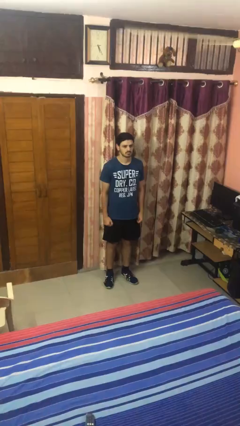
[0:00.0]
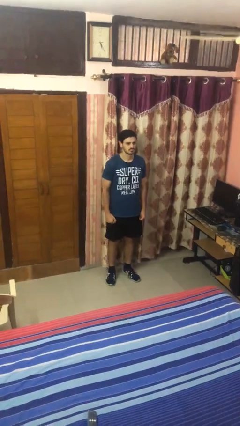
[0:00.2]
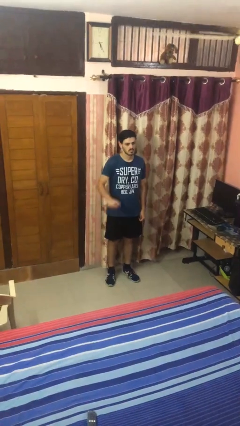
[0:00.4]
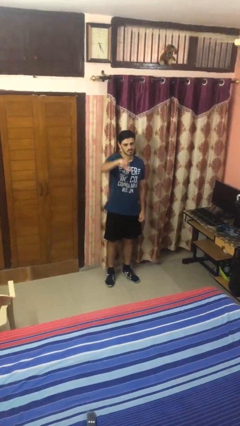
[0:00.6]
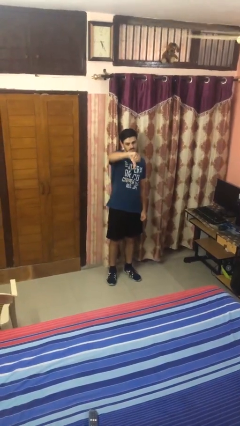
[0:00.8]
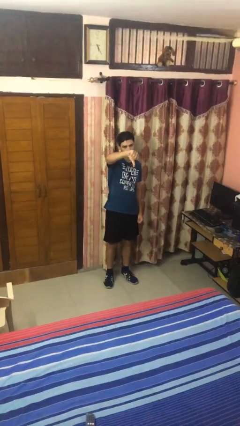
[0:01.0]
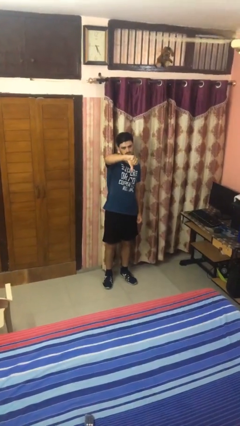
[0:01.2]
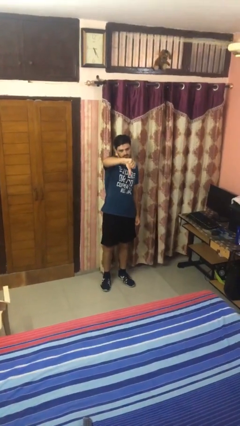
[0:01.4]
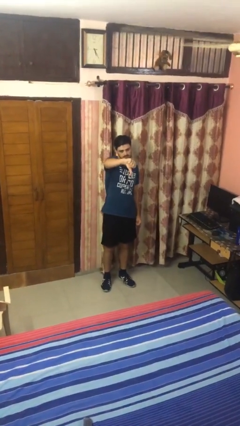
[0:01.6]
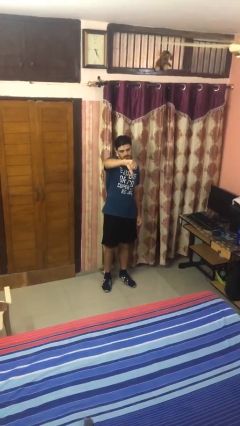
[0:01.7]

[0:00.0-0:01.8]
person gestures thumbs down

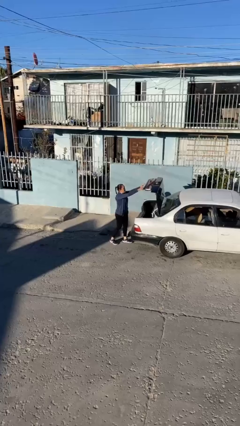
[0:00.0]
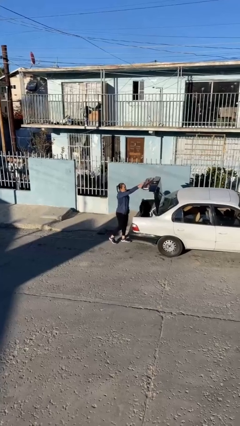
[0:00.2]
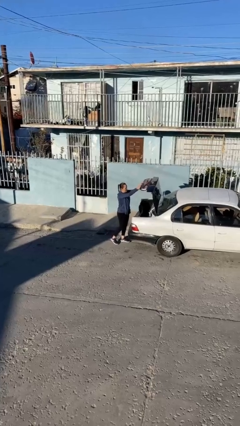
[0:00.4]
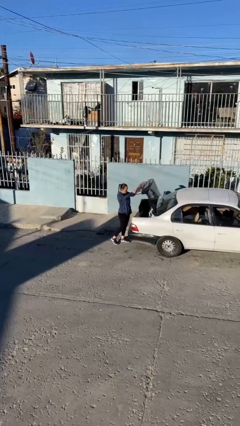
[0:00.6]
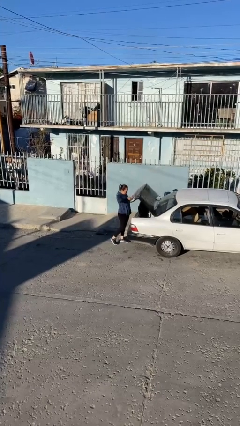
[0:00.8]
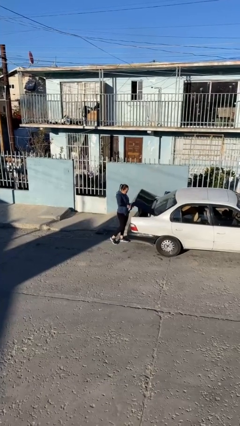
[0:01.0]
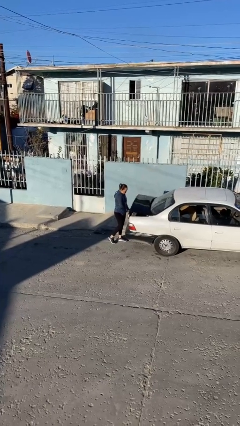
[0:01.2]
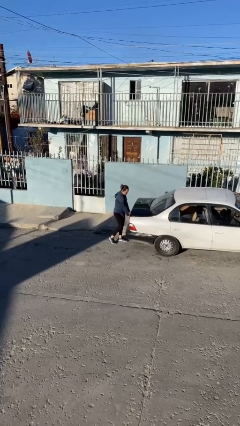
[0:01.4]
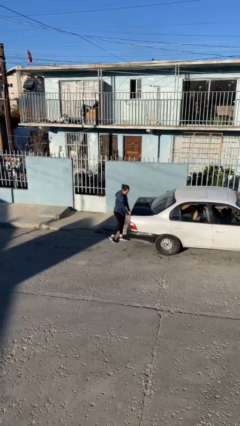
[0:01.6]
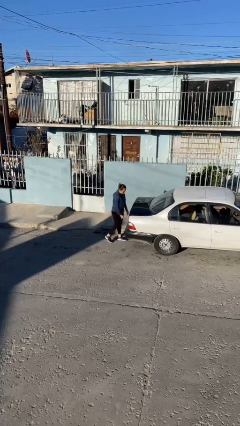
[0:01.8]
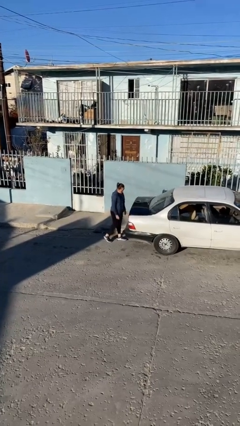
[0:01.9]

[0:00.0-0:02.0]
person closes car trunk

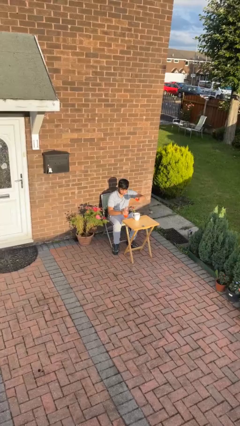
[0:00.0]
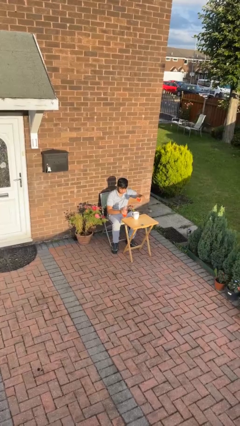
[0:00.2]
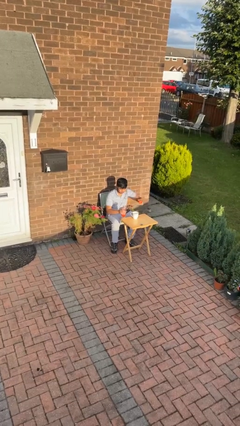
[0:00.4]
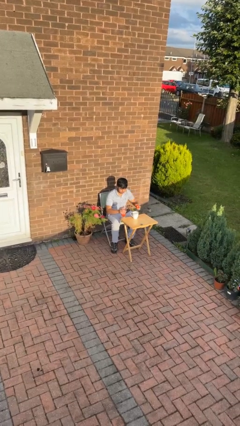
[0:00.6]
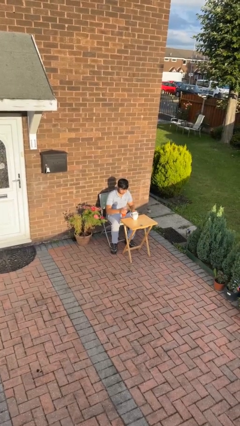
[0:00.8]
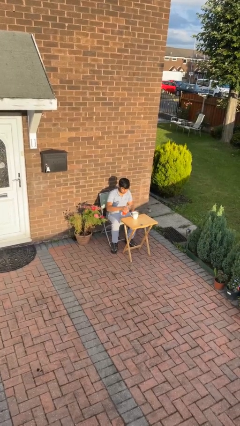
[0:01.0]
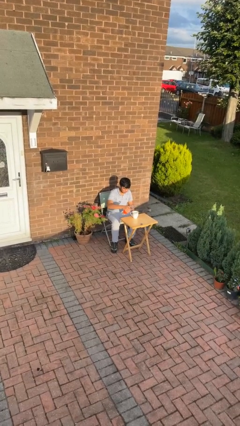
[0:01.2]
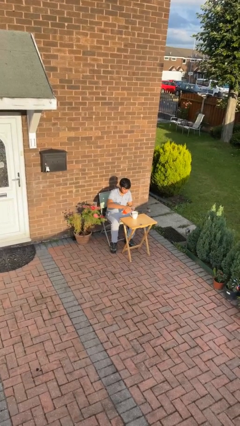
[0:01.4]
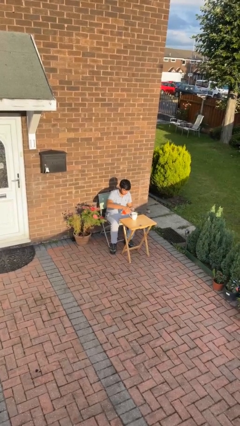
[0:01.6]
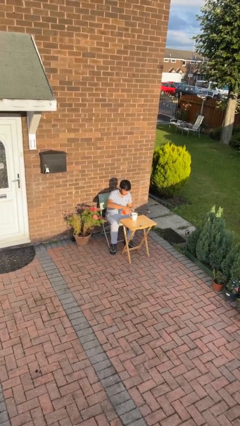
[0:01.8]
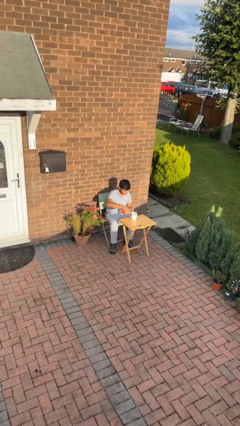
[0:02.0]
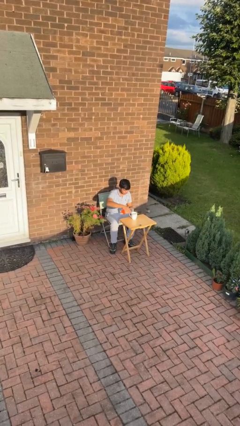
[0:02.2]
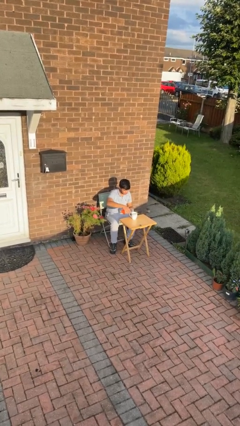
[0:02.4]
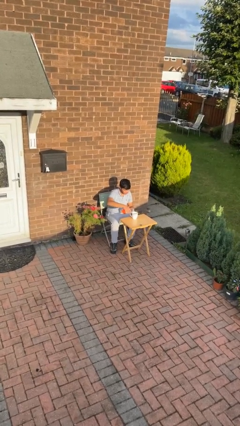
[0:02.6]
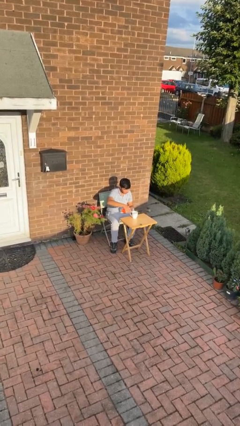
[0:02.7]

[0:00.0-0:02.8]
person pours liquid into cup

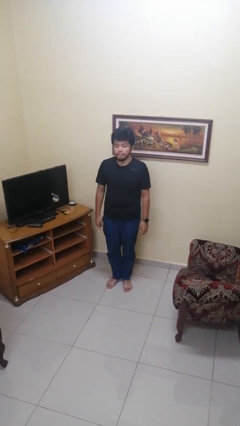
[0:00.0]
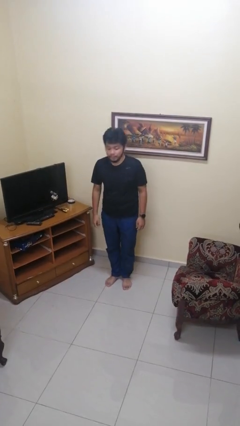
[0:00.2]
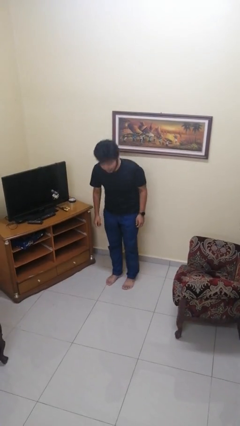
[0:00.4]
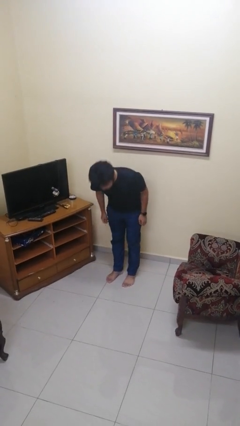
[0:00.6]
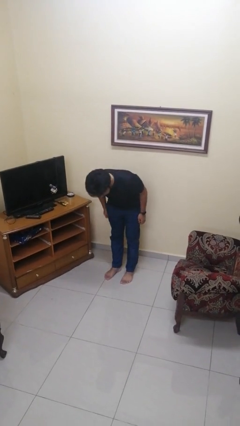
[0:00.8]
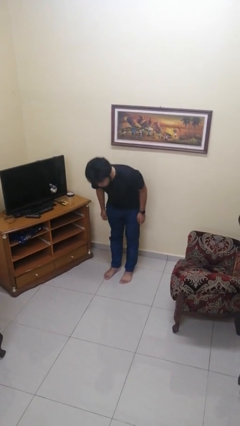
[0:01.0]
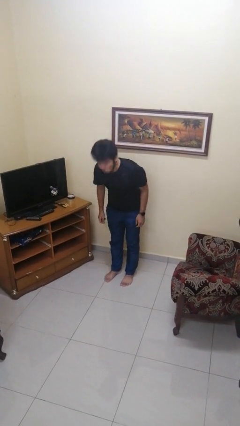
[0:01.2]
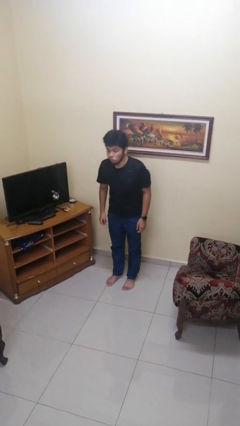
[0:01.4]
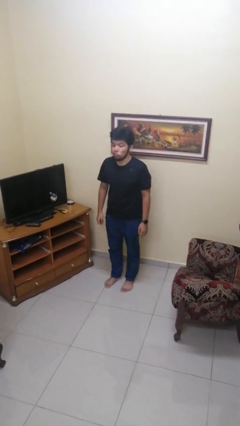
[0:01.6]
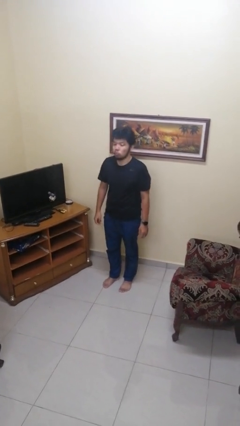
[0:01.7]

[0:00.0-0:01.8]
person bows

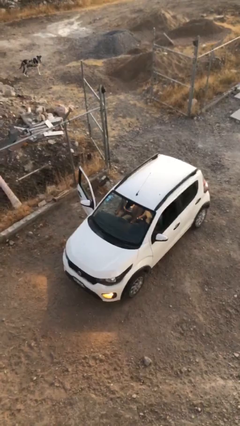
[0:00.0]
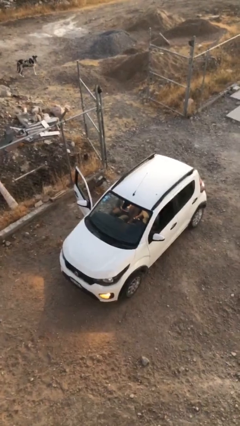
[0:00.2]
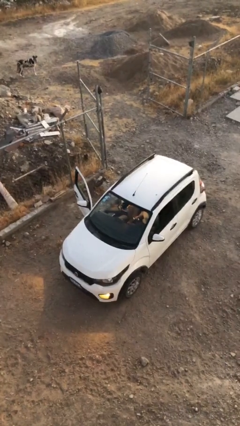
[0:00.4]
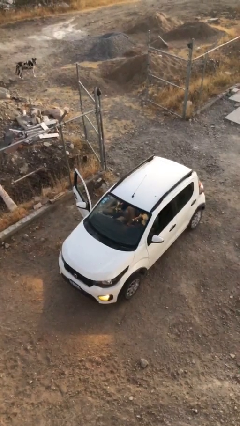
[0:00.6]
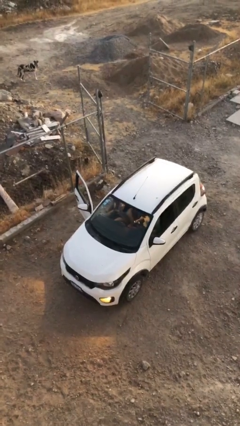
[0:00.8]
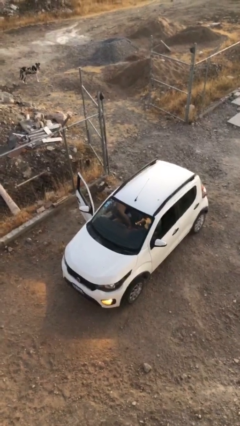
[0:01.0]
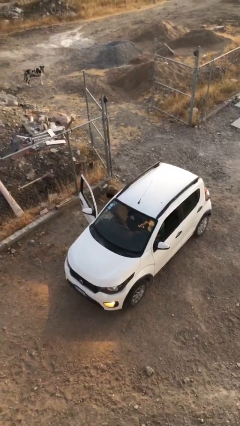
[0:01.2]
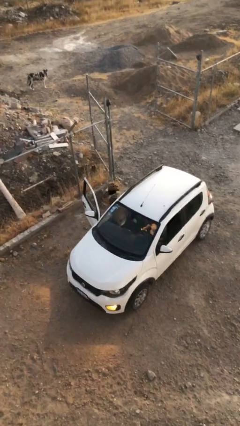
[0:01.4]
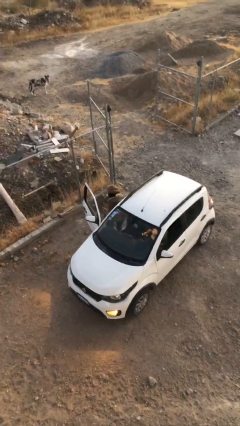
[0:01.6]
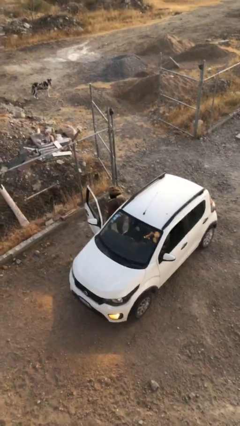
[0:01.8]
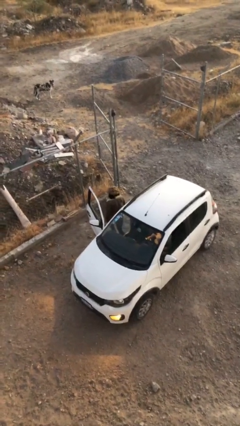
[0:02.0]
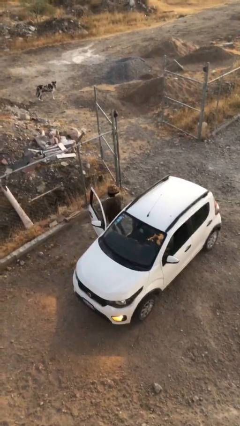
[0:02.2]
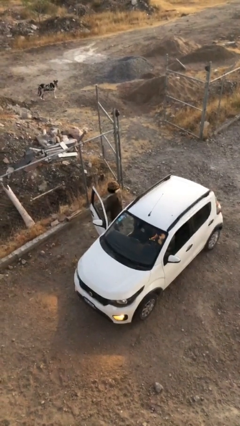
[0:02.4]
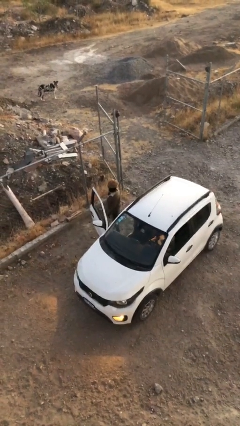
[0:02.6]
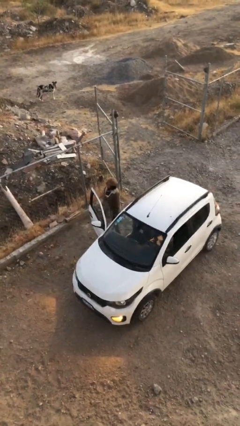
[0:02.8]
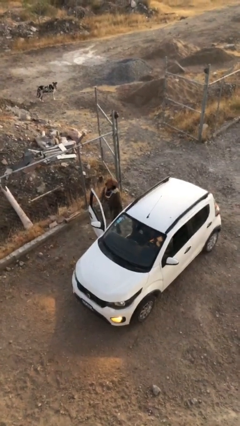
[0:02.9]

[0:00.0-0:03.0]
person exits car

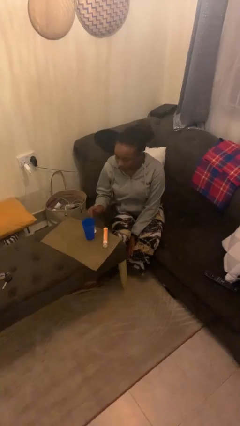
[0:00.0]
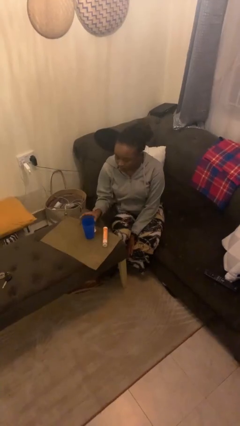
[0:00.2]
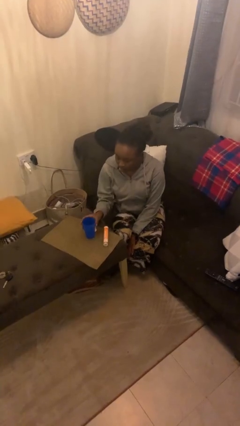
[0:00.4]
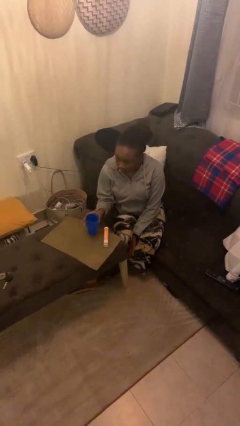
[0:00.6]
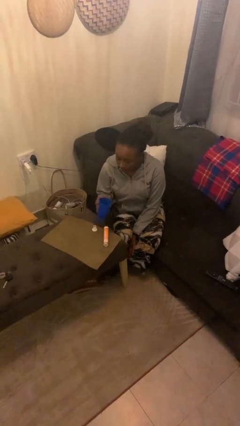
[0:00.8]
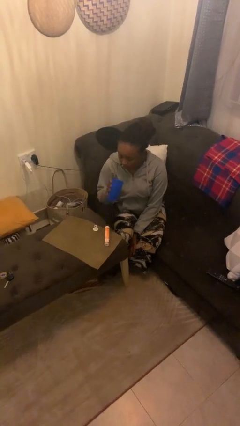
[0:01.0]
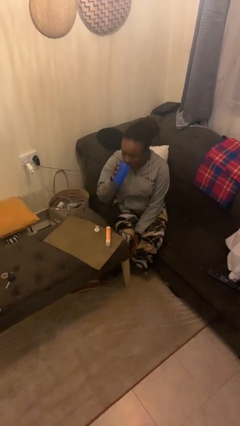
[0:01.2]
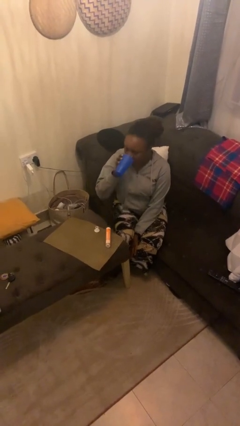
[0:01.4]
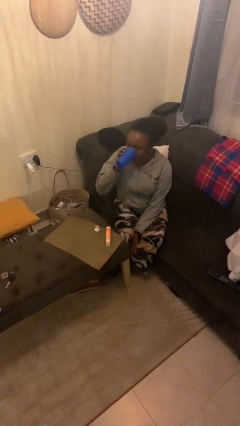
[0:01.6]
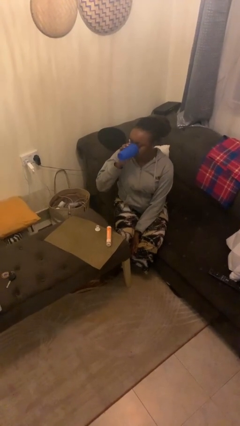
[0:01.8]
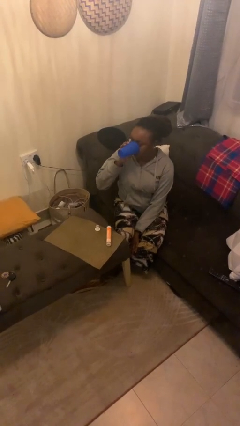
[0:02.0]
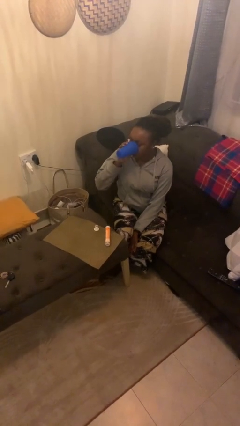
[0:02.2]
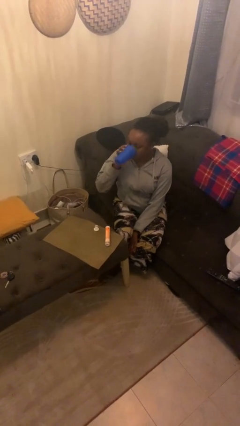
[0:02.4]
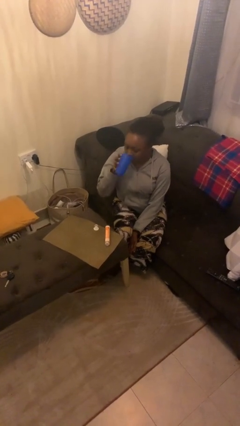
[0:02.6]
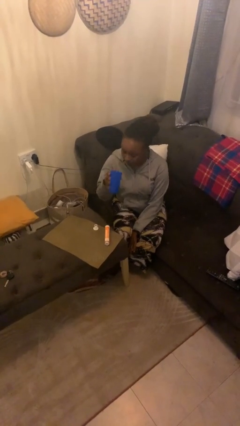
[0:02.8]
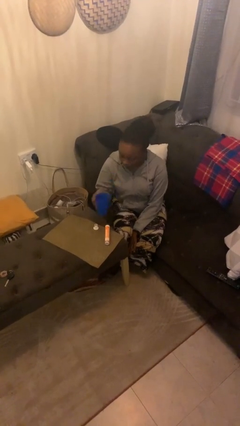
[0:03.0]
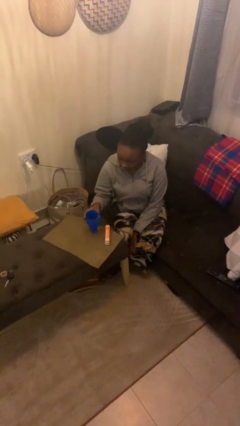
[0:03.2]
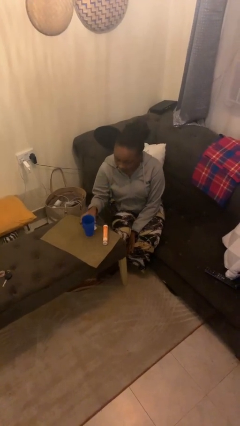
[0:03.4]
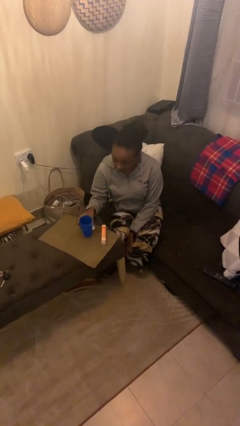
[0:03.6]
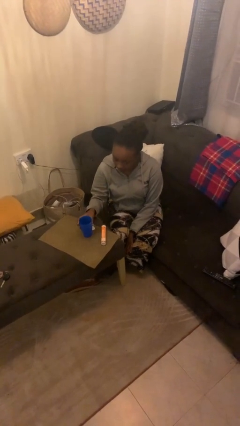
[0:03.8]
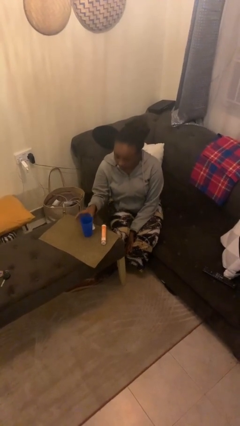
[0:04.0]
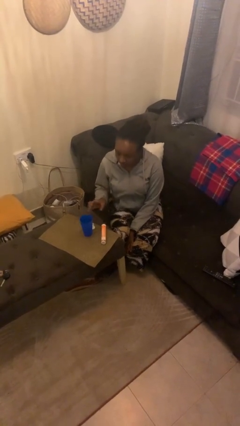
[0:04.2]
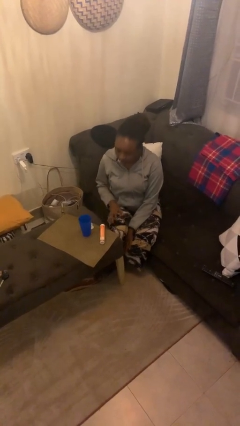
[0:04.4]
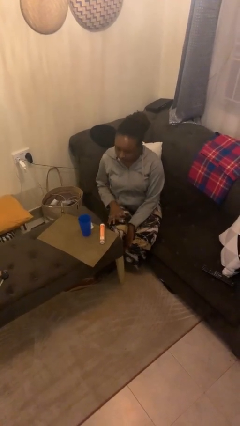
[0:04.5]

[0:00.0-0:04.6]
person drinks from cup

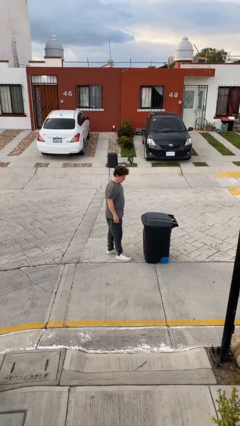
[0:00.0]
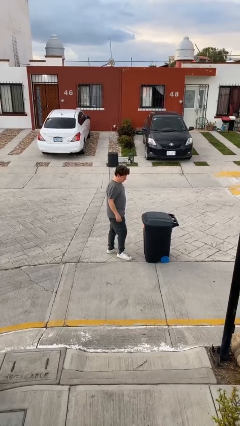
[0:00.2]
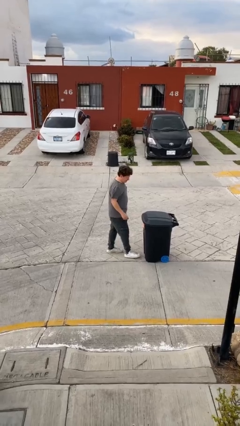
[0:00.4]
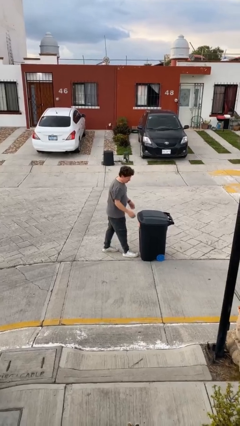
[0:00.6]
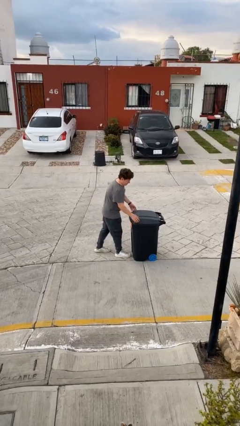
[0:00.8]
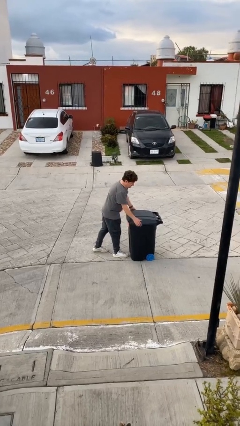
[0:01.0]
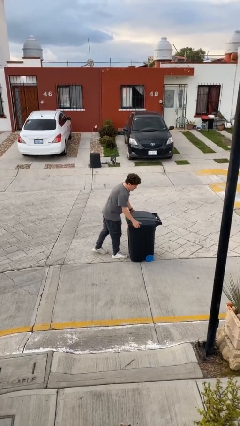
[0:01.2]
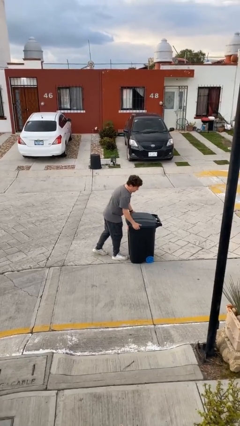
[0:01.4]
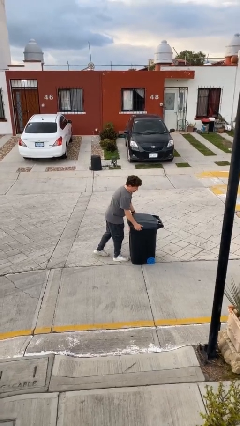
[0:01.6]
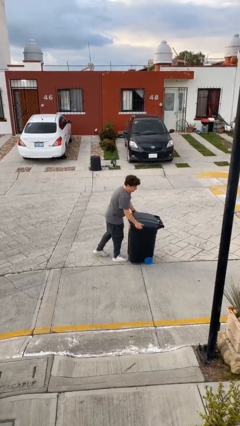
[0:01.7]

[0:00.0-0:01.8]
person picks up object from floor
